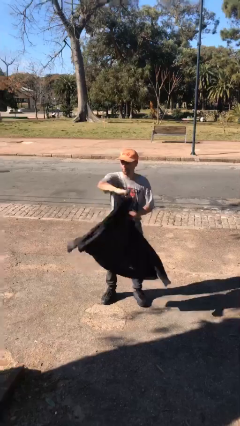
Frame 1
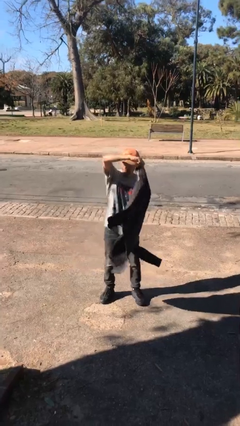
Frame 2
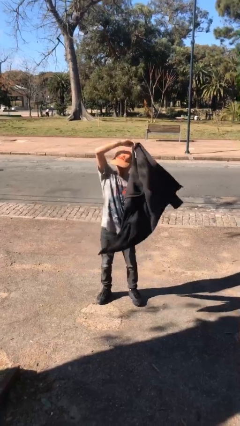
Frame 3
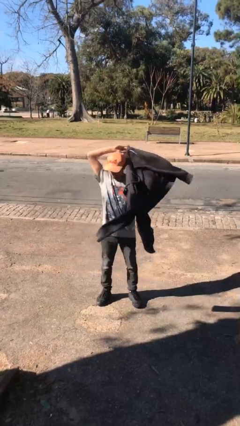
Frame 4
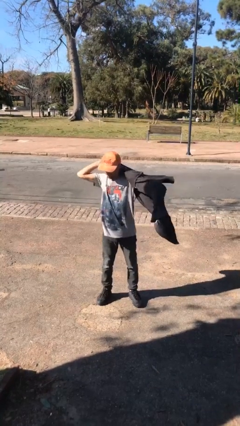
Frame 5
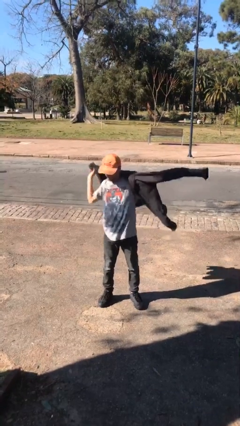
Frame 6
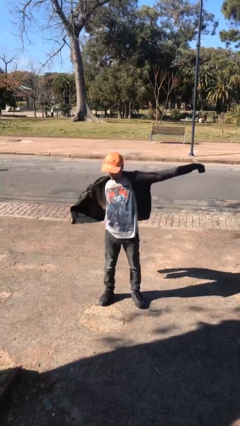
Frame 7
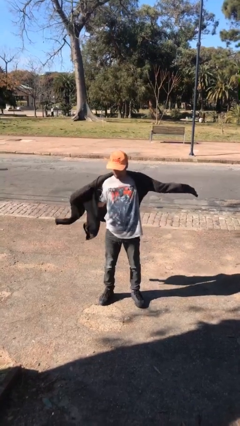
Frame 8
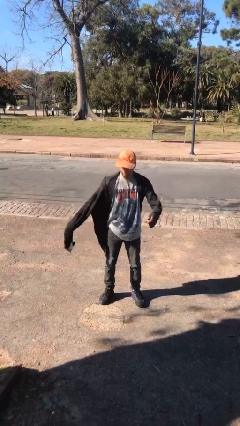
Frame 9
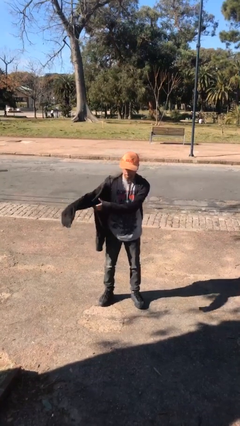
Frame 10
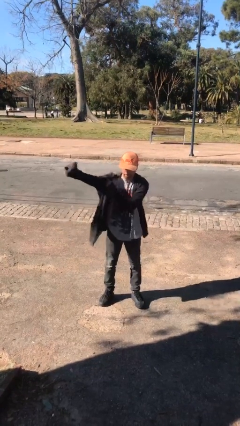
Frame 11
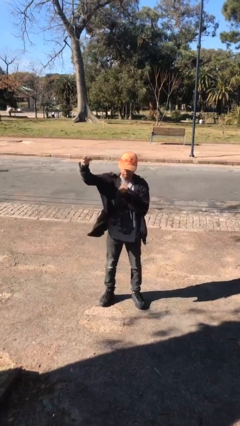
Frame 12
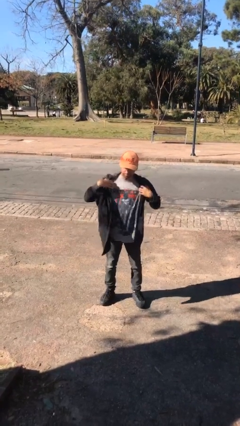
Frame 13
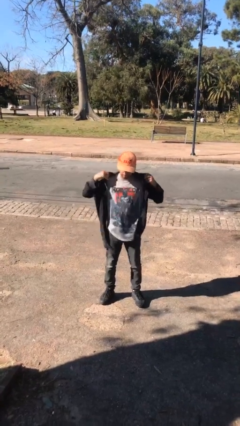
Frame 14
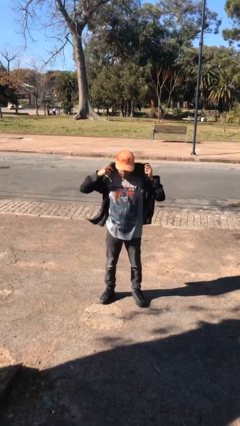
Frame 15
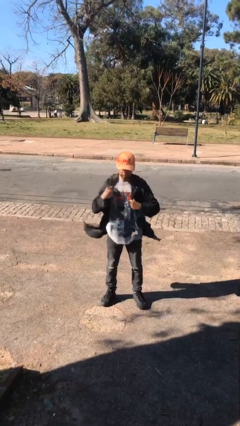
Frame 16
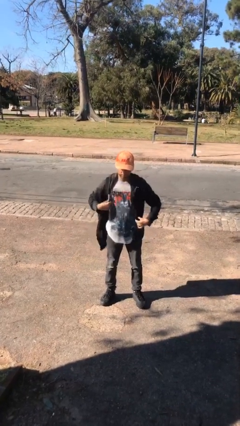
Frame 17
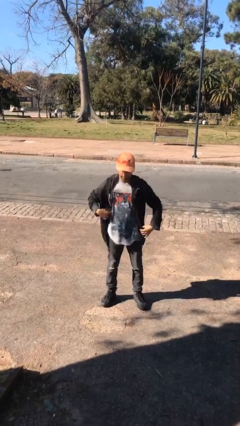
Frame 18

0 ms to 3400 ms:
person puts on jacket

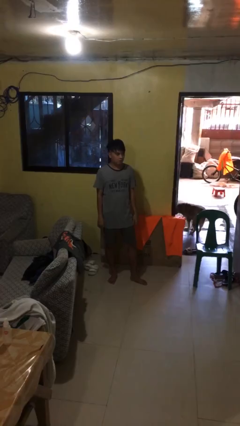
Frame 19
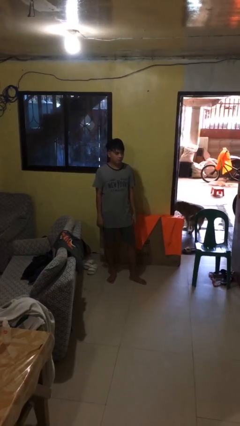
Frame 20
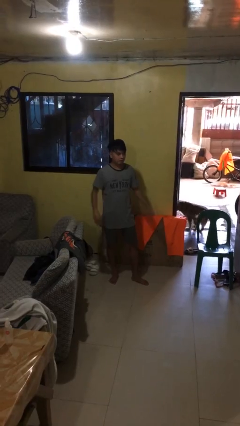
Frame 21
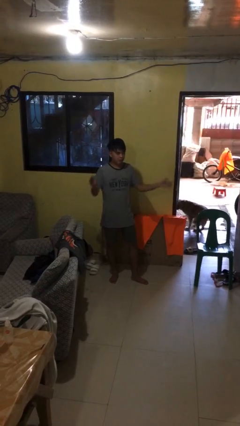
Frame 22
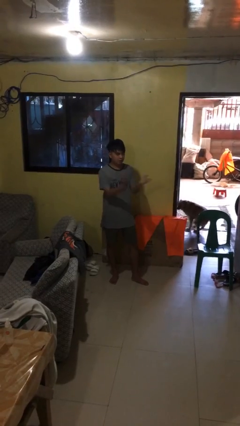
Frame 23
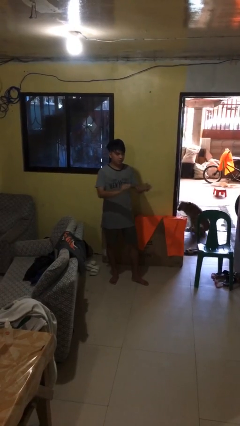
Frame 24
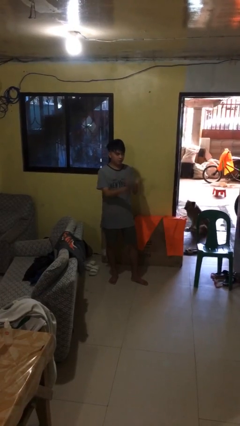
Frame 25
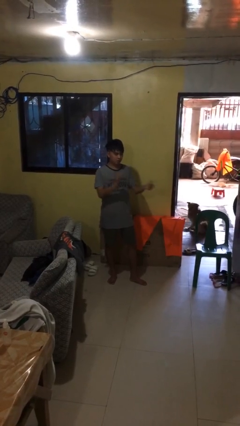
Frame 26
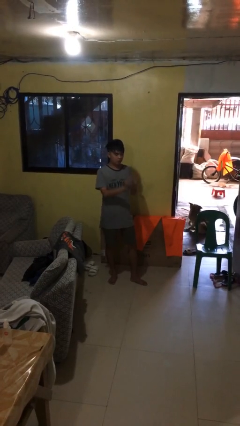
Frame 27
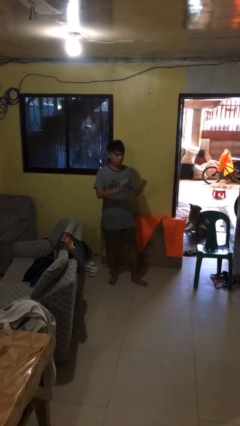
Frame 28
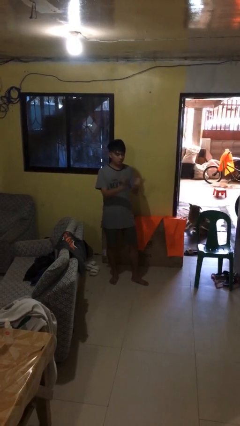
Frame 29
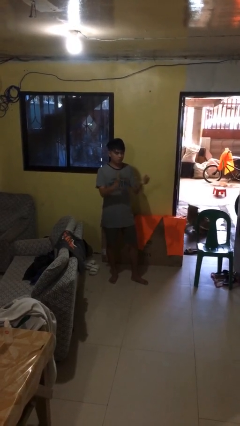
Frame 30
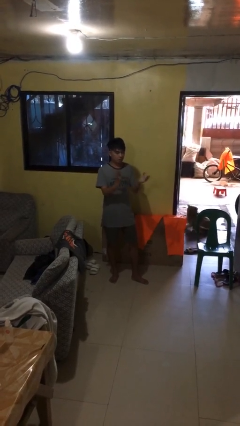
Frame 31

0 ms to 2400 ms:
person claps hands

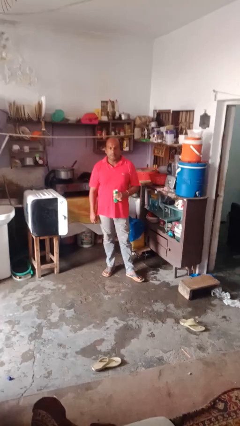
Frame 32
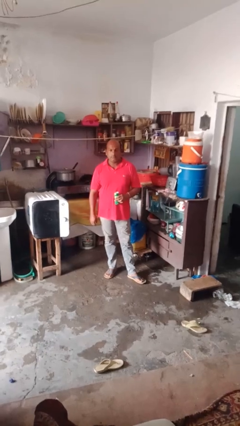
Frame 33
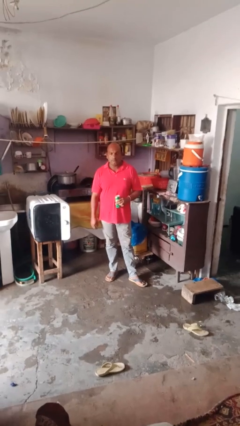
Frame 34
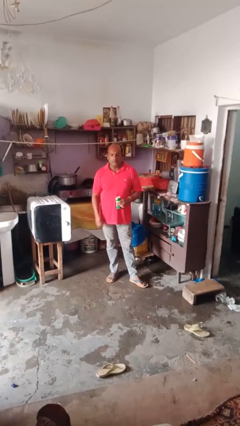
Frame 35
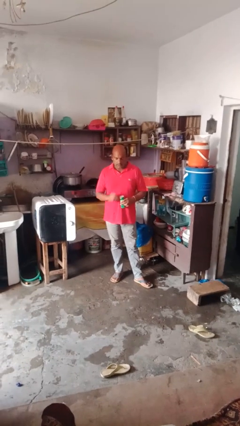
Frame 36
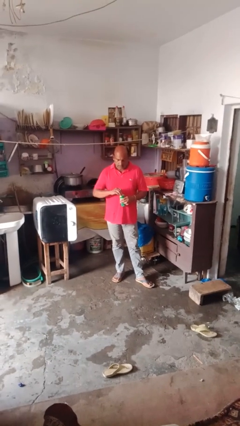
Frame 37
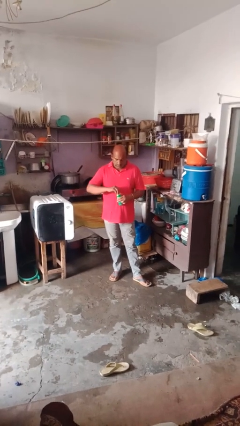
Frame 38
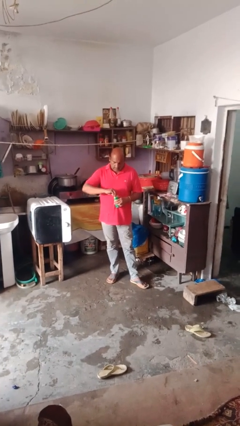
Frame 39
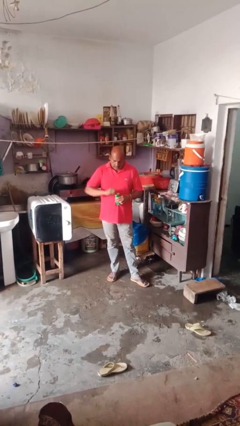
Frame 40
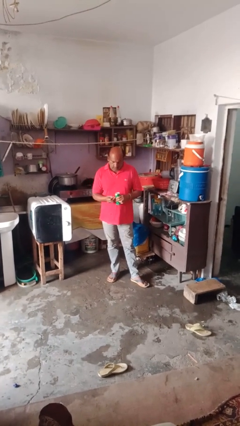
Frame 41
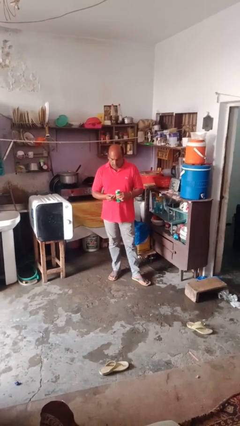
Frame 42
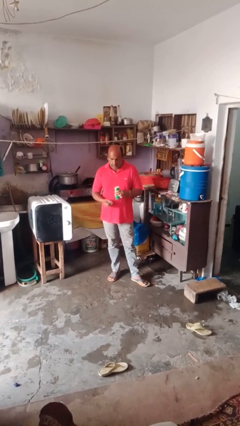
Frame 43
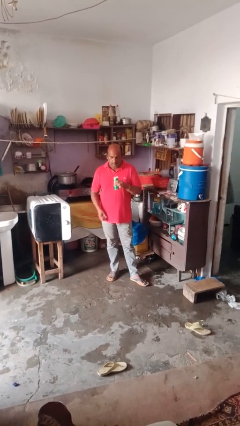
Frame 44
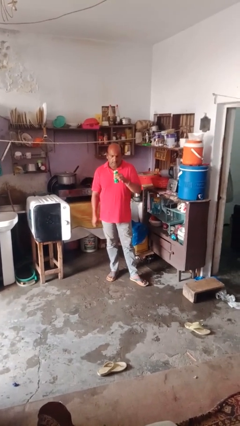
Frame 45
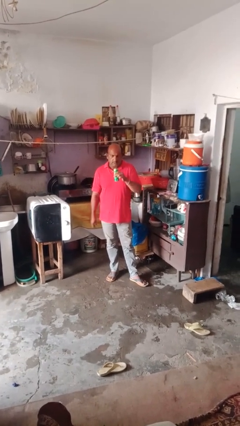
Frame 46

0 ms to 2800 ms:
person opens beverage can

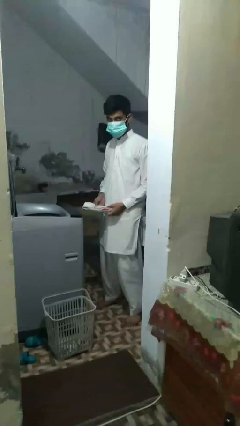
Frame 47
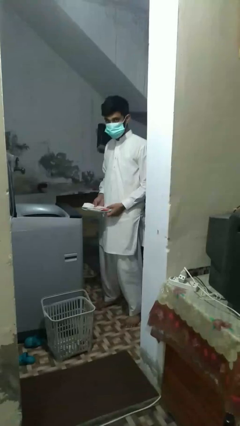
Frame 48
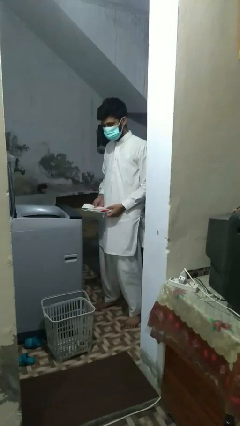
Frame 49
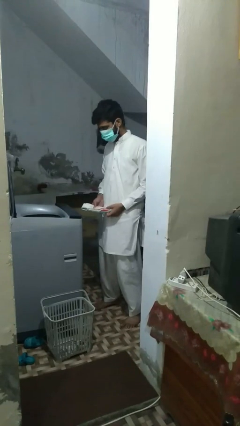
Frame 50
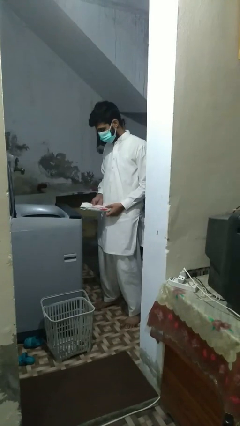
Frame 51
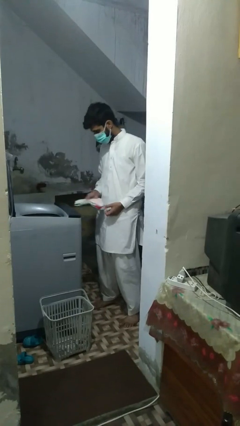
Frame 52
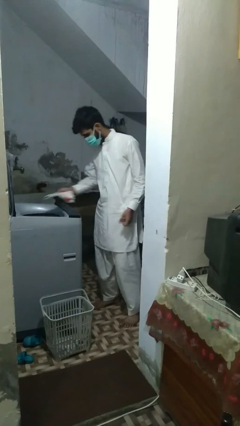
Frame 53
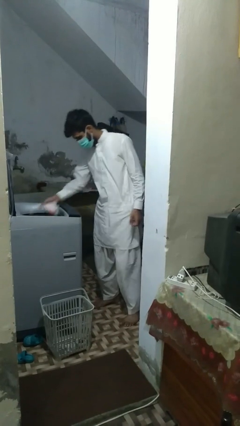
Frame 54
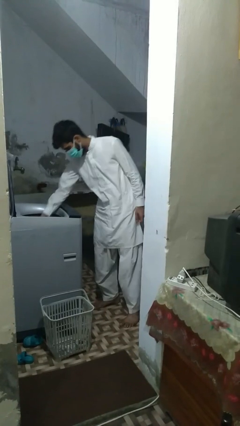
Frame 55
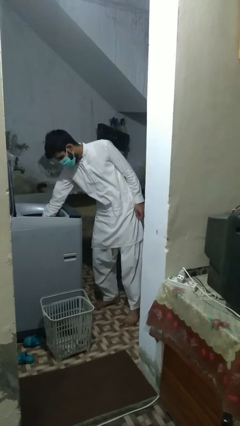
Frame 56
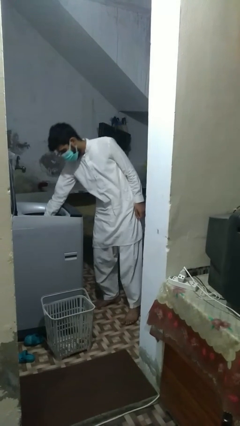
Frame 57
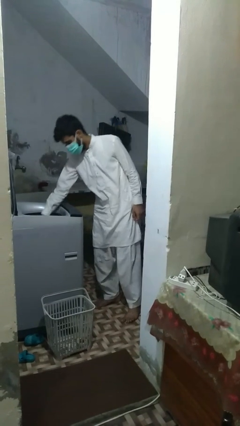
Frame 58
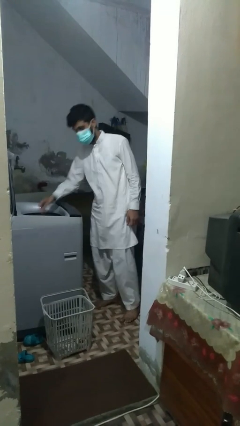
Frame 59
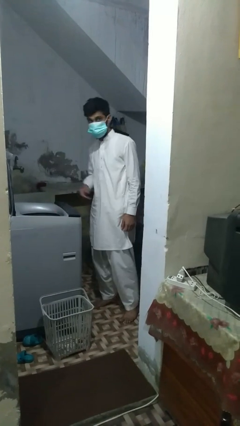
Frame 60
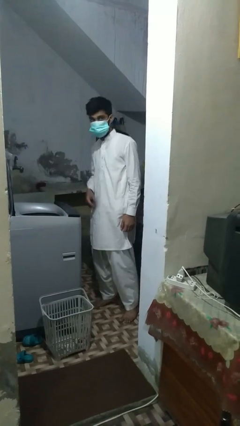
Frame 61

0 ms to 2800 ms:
person loads dryer

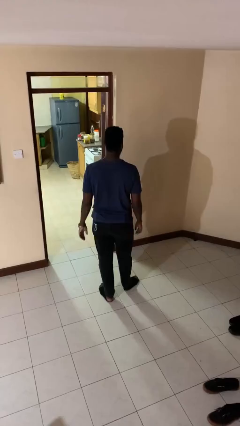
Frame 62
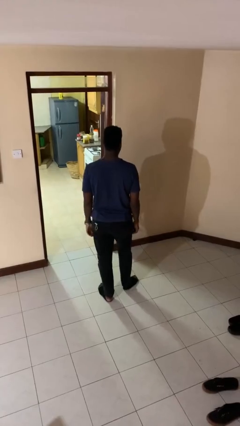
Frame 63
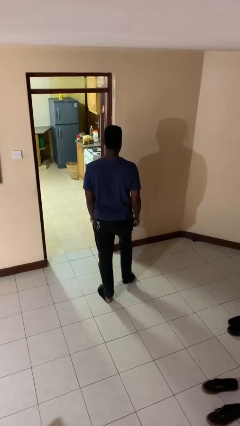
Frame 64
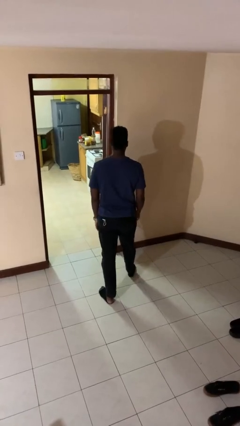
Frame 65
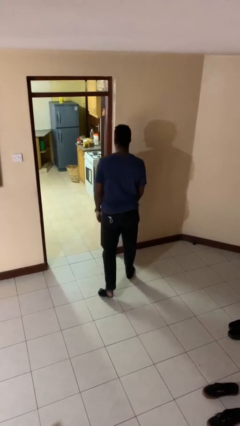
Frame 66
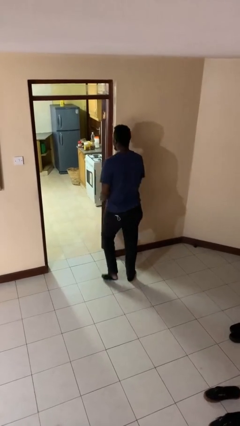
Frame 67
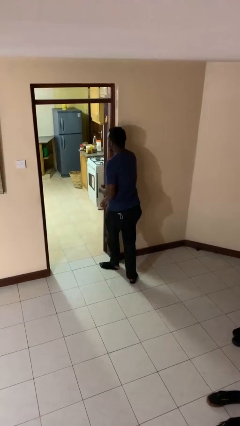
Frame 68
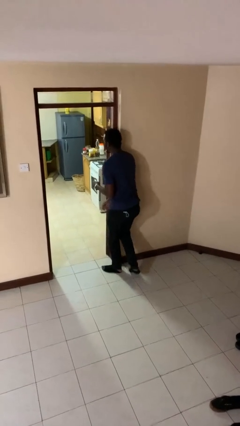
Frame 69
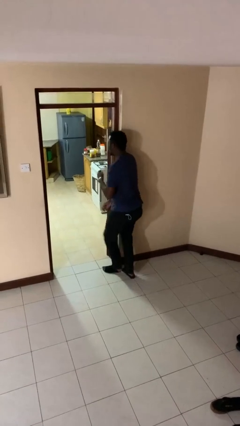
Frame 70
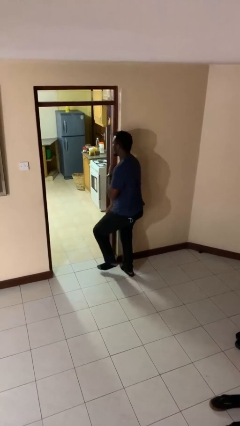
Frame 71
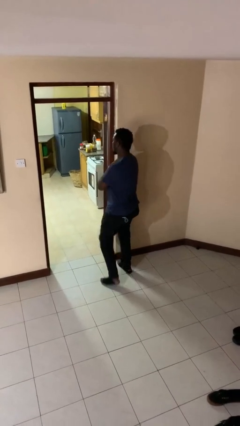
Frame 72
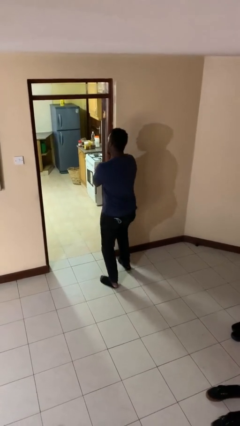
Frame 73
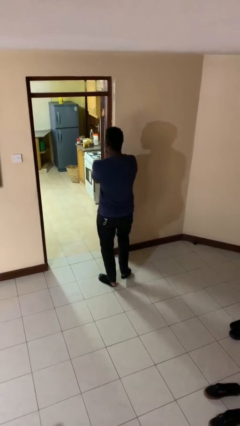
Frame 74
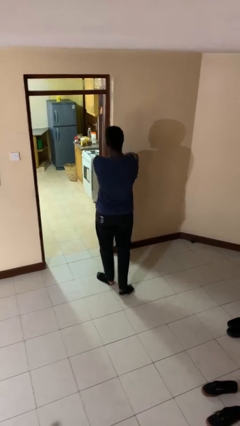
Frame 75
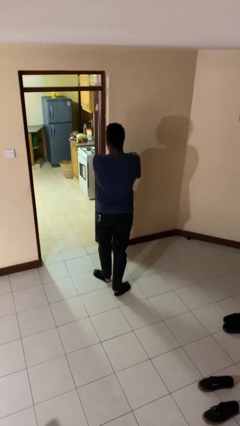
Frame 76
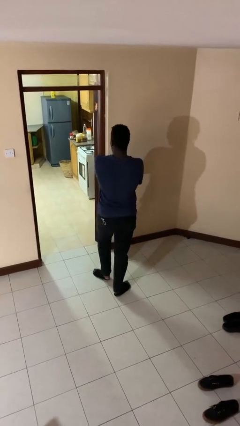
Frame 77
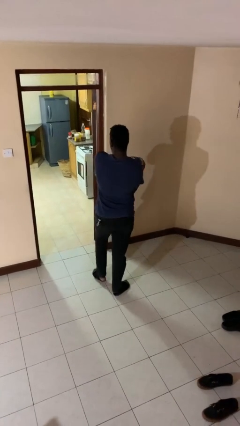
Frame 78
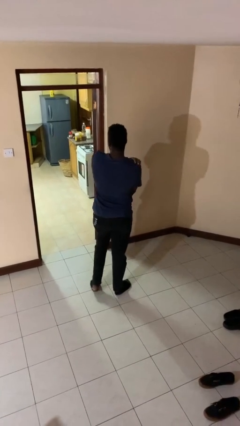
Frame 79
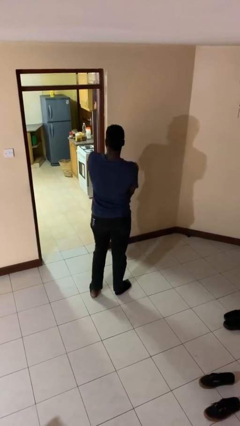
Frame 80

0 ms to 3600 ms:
person bumps into wall

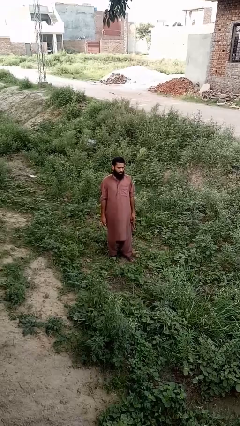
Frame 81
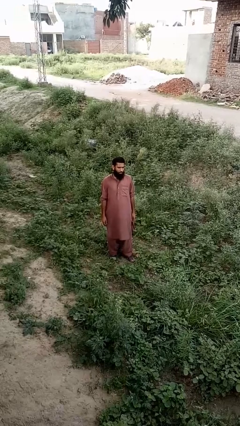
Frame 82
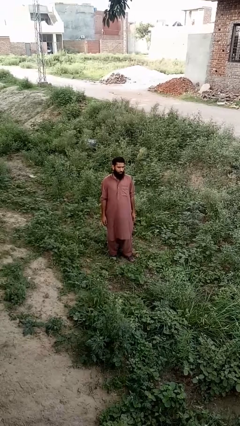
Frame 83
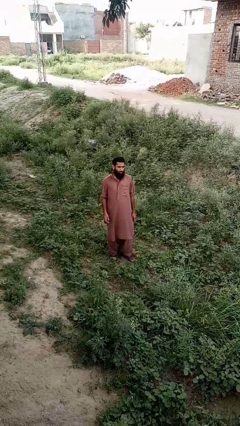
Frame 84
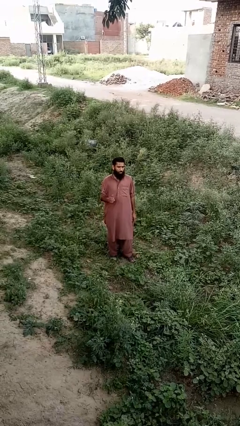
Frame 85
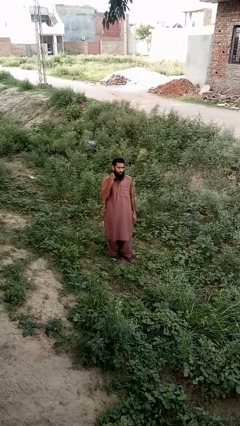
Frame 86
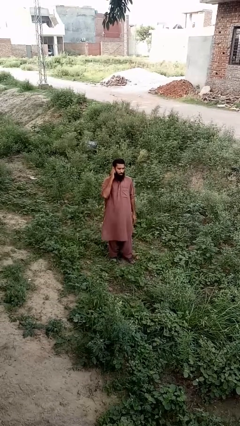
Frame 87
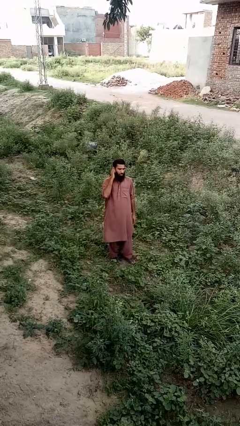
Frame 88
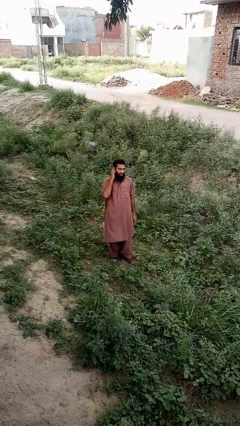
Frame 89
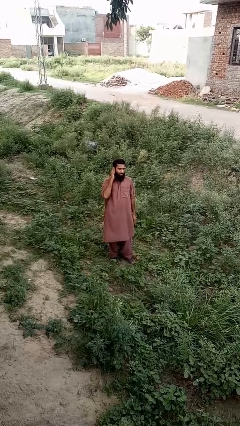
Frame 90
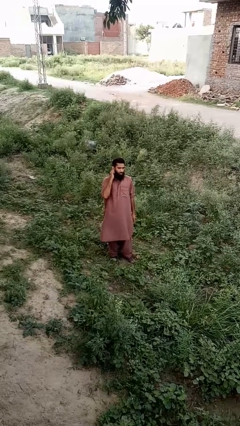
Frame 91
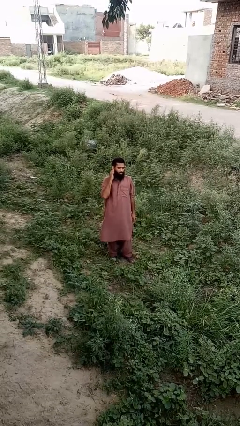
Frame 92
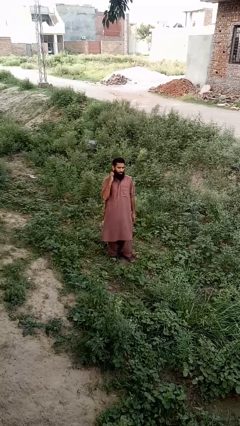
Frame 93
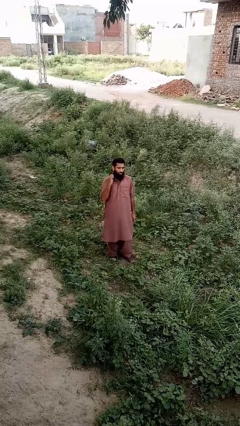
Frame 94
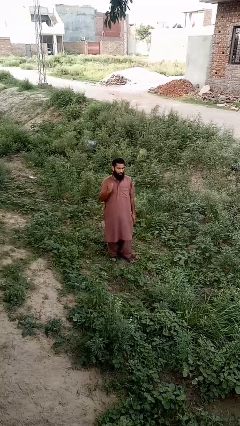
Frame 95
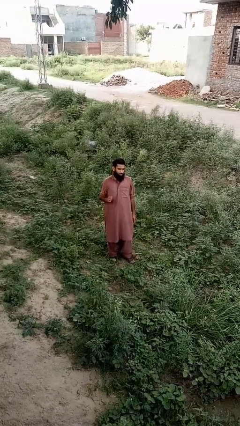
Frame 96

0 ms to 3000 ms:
person touches earlobe
